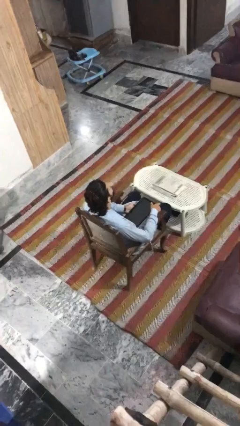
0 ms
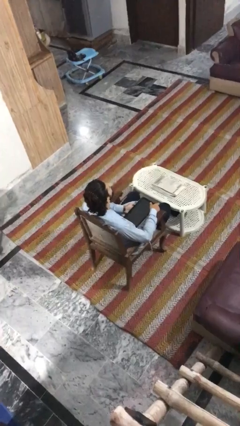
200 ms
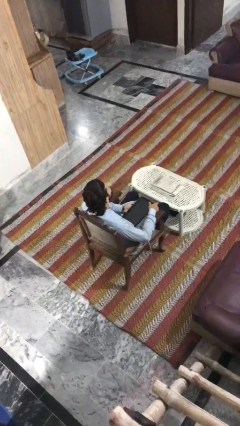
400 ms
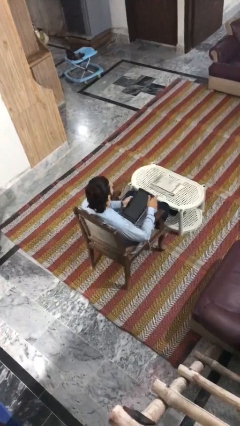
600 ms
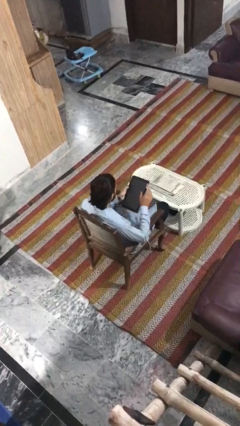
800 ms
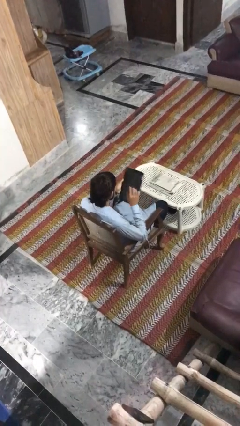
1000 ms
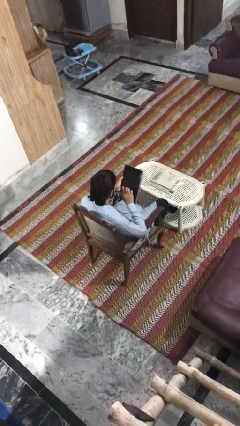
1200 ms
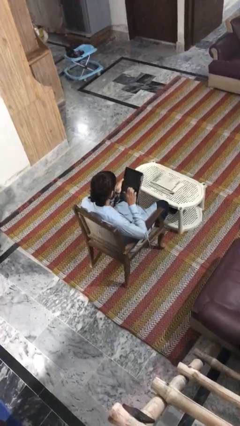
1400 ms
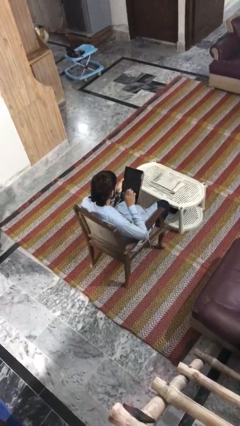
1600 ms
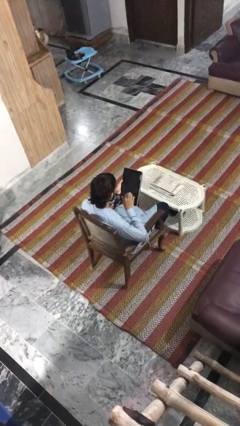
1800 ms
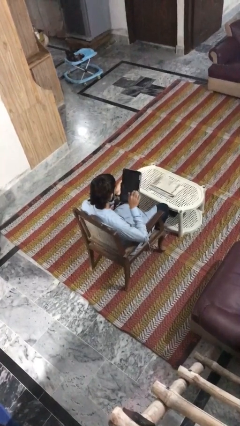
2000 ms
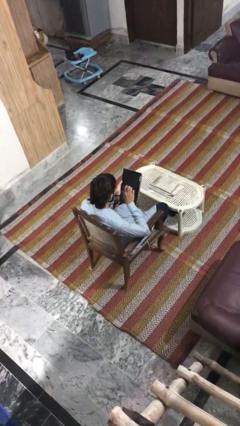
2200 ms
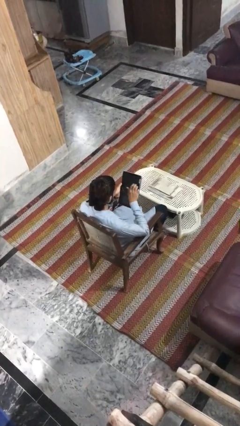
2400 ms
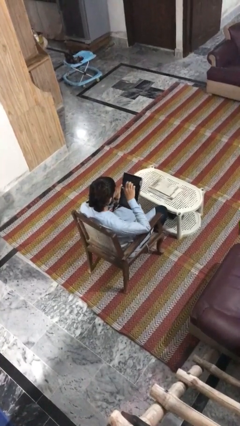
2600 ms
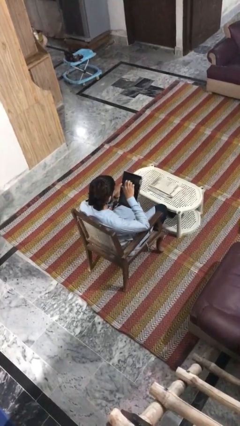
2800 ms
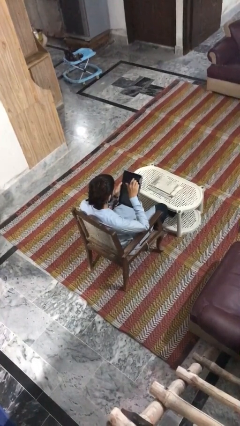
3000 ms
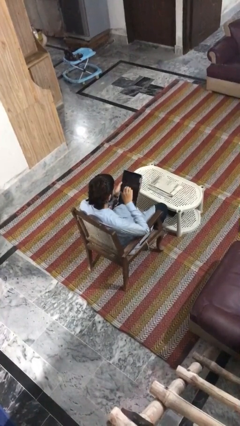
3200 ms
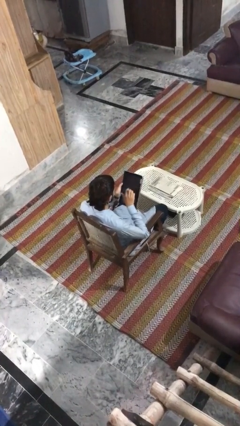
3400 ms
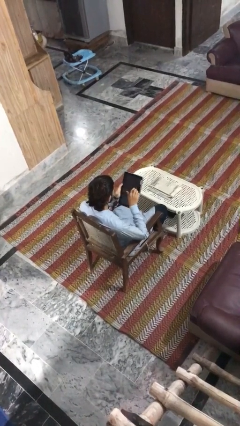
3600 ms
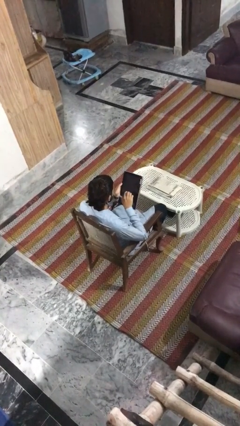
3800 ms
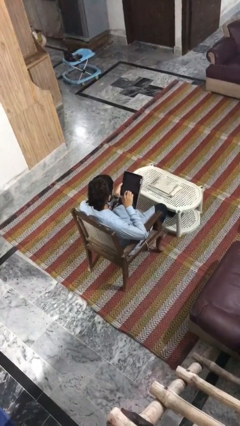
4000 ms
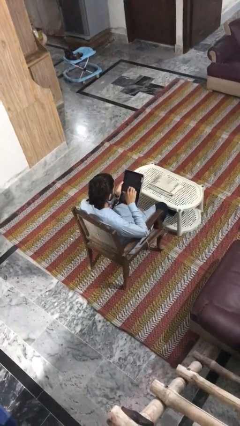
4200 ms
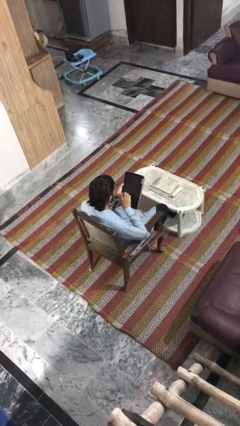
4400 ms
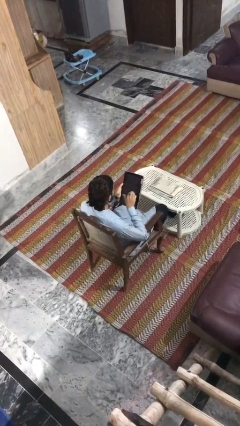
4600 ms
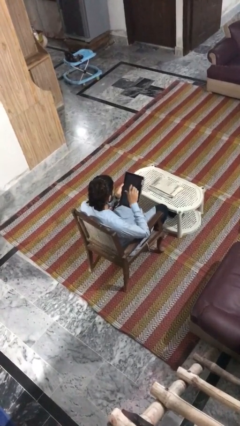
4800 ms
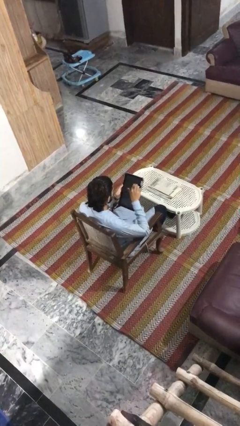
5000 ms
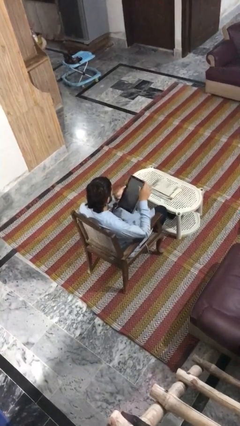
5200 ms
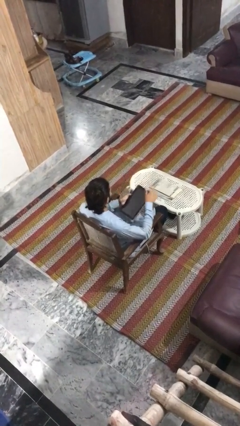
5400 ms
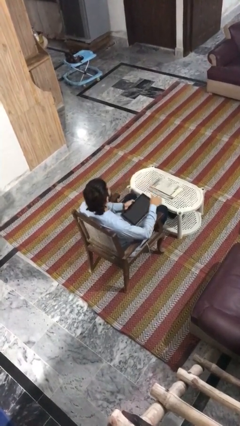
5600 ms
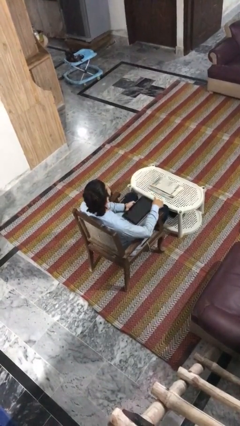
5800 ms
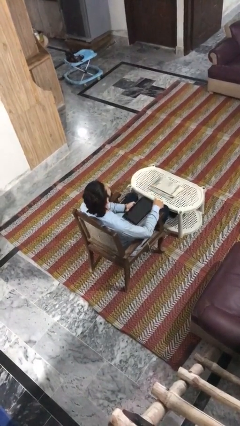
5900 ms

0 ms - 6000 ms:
person interacts with tablet

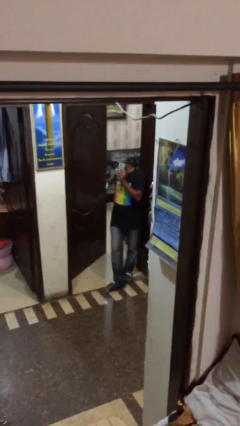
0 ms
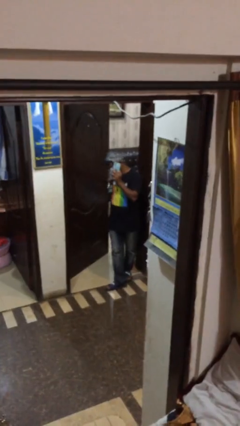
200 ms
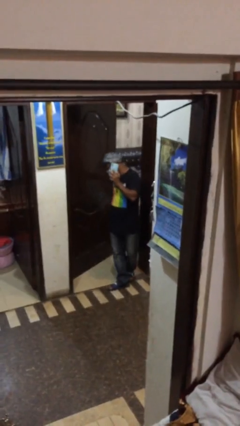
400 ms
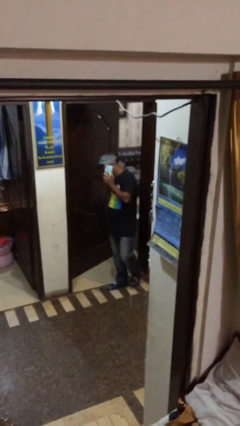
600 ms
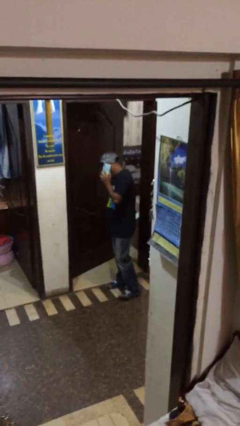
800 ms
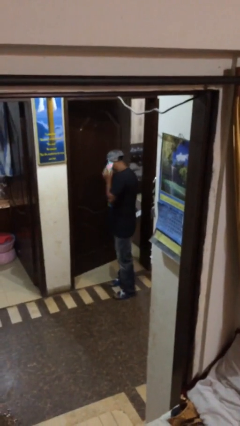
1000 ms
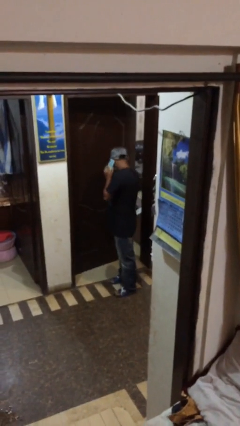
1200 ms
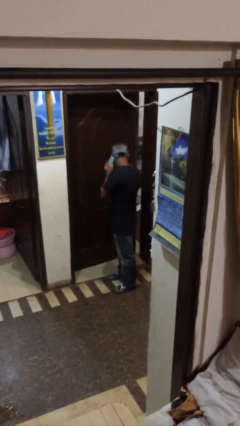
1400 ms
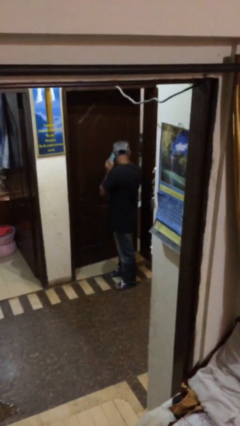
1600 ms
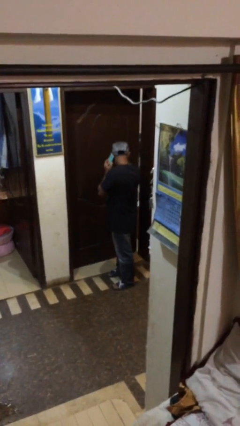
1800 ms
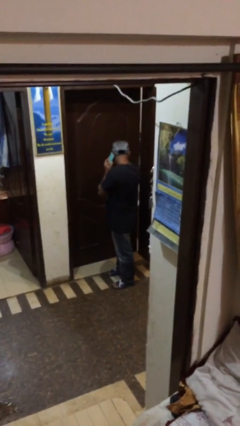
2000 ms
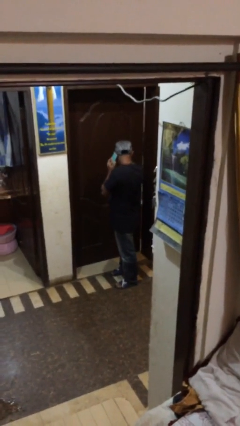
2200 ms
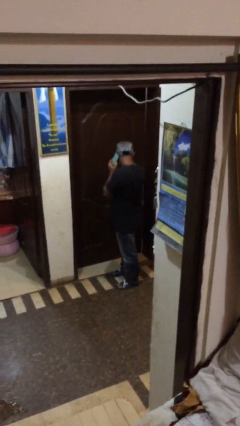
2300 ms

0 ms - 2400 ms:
person closes facility door

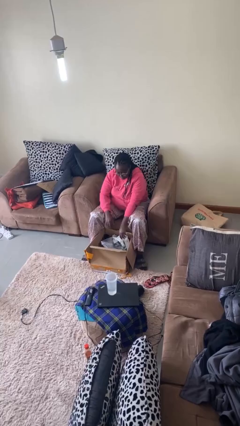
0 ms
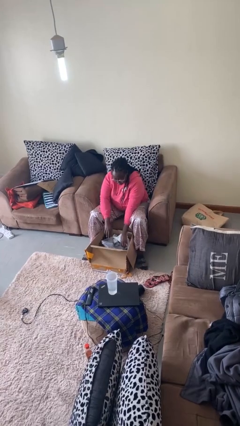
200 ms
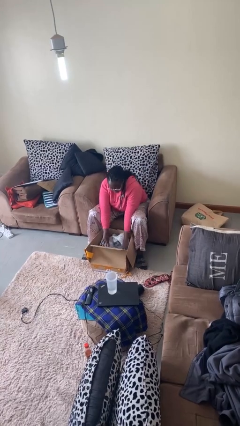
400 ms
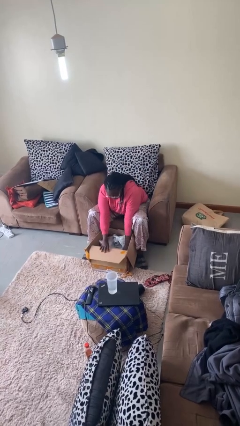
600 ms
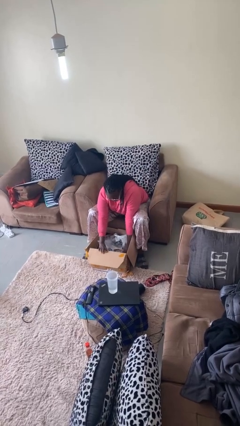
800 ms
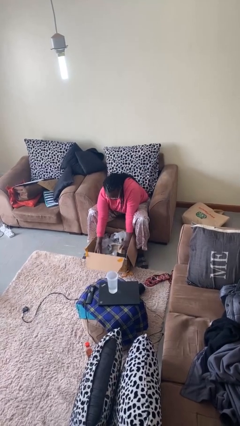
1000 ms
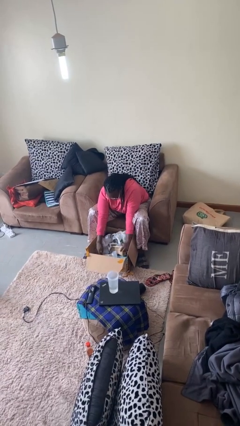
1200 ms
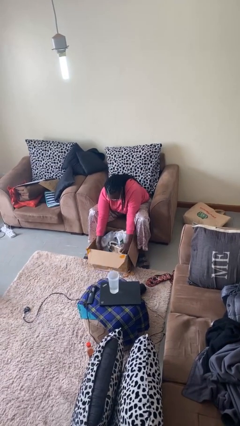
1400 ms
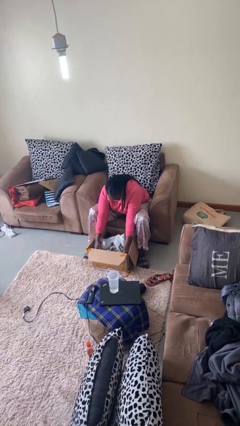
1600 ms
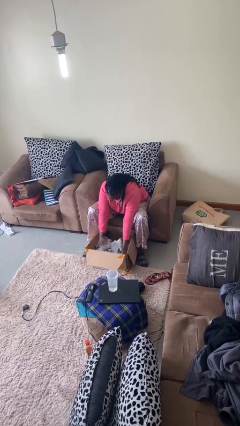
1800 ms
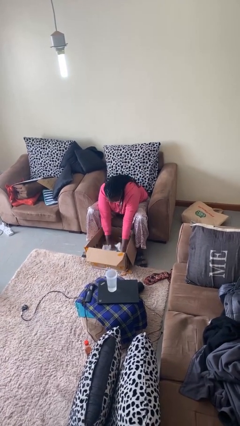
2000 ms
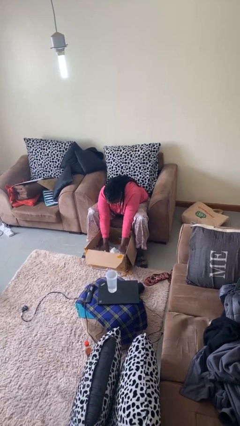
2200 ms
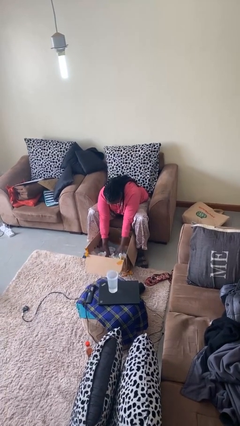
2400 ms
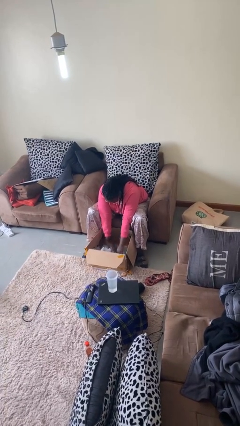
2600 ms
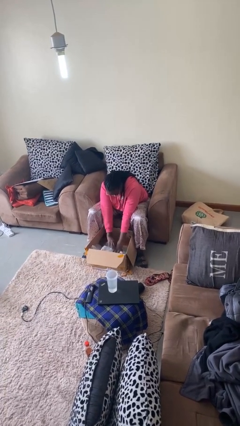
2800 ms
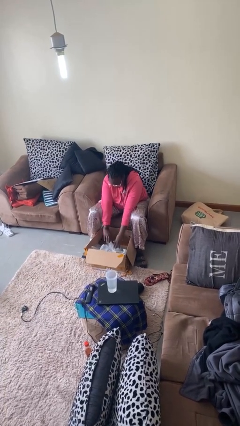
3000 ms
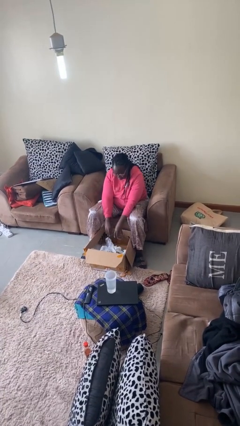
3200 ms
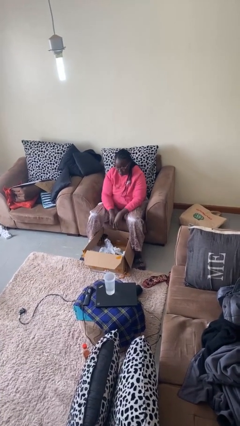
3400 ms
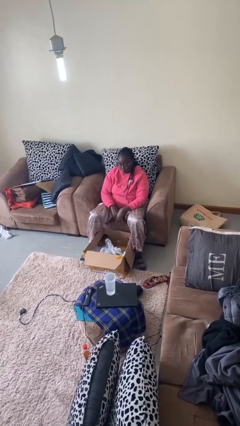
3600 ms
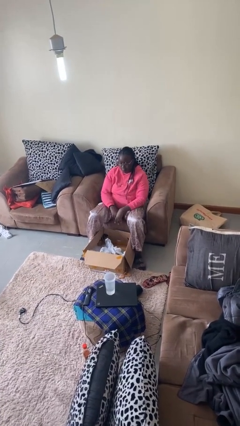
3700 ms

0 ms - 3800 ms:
person searches in box

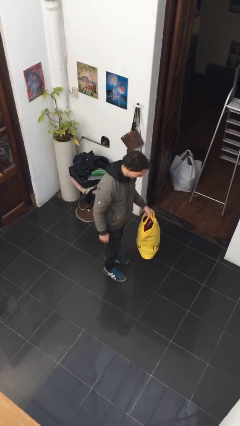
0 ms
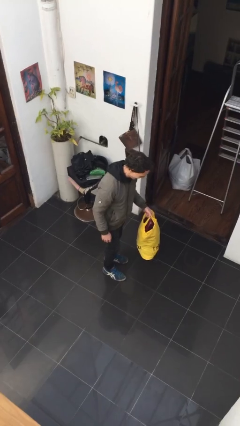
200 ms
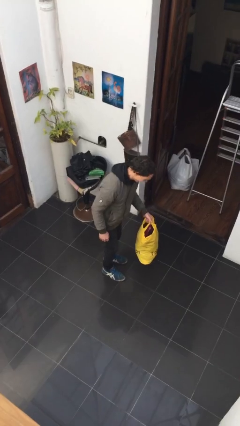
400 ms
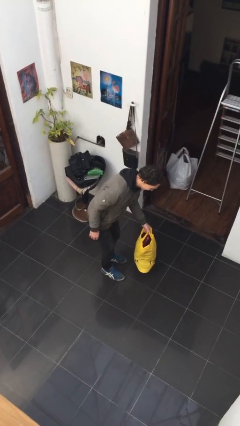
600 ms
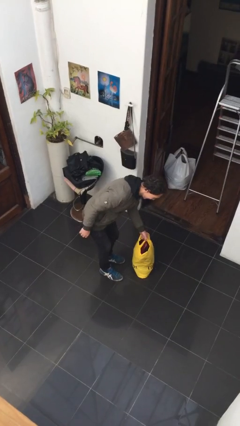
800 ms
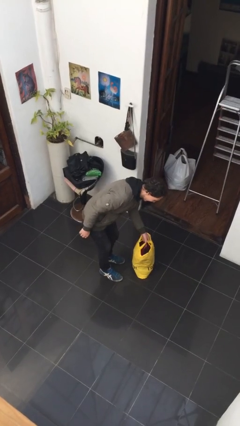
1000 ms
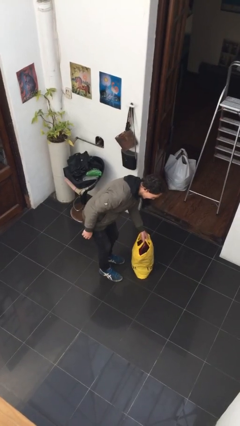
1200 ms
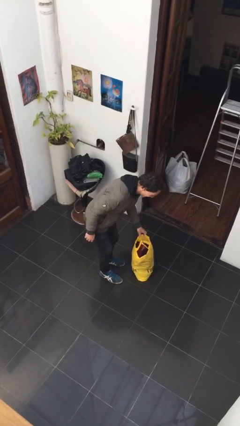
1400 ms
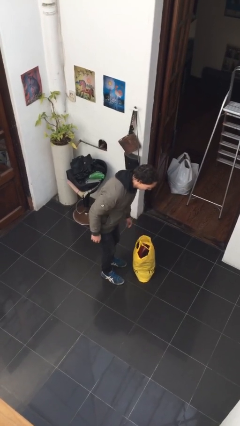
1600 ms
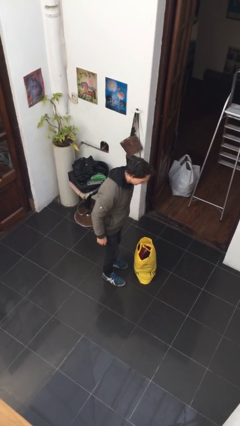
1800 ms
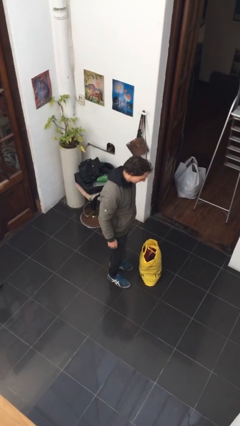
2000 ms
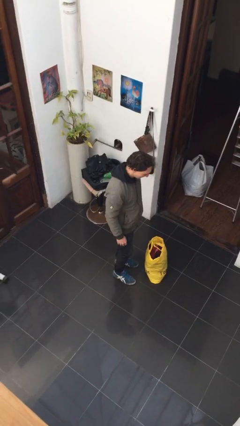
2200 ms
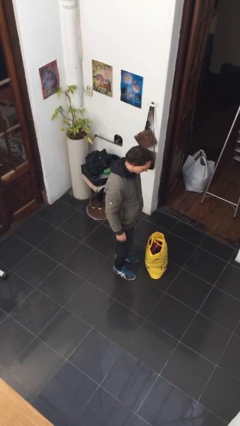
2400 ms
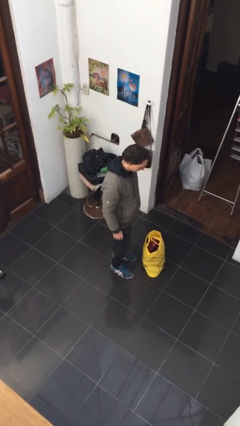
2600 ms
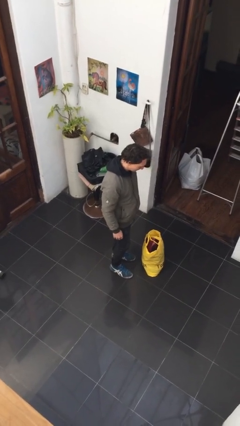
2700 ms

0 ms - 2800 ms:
person puts down object on floor

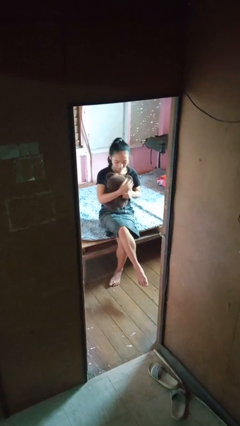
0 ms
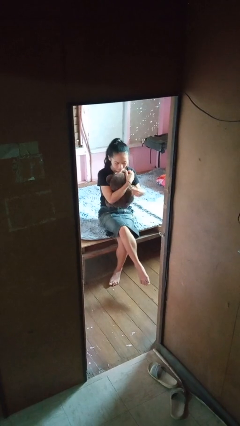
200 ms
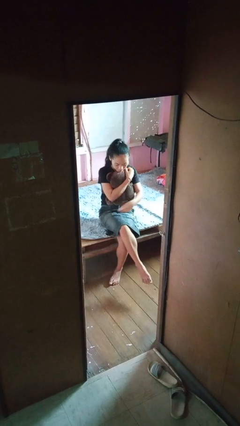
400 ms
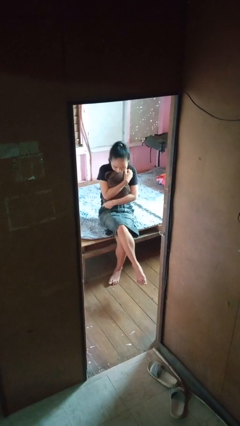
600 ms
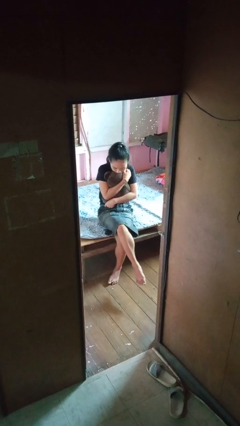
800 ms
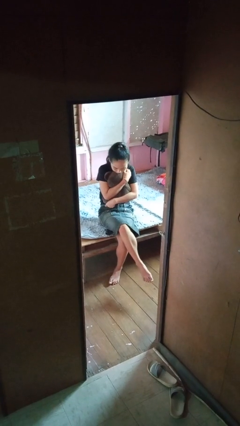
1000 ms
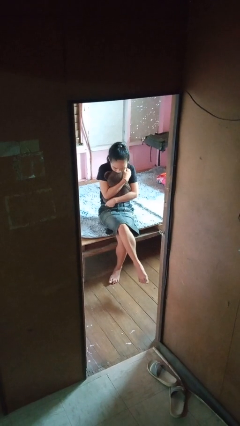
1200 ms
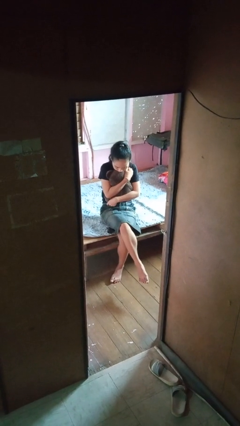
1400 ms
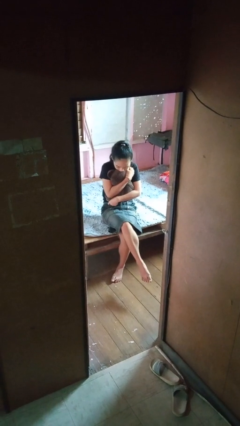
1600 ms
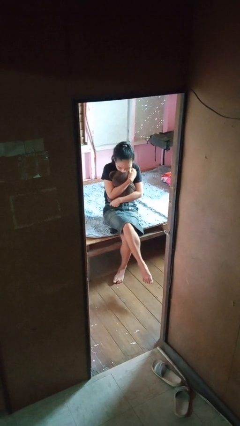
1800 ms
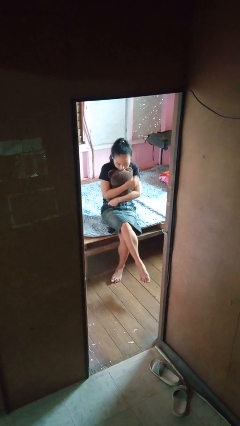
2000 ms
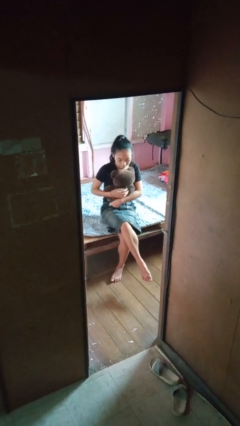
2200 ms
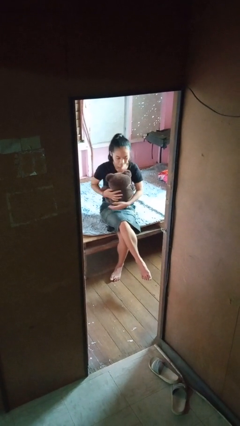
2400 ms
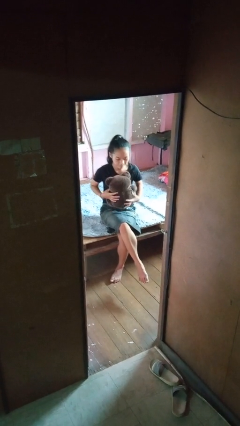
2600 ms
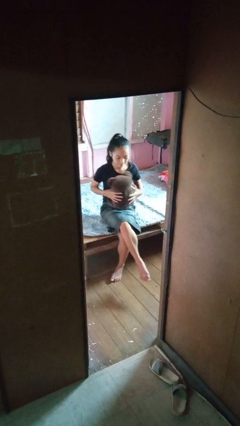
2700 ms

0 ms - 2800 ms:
person hugs stuffed animal
